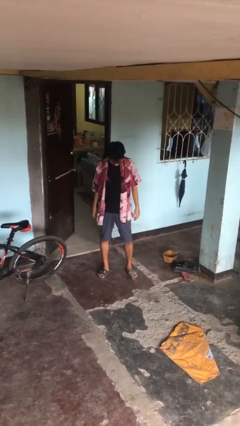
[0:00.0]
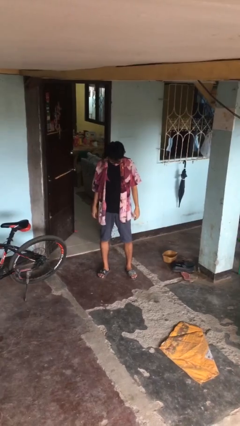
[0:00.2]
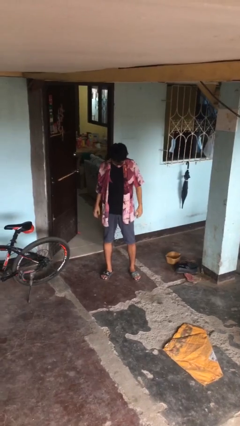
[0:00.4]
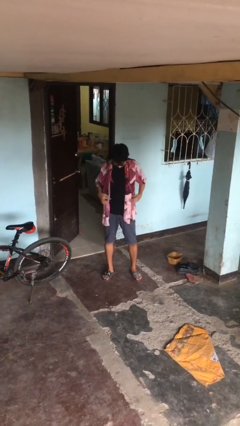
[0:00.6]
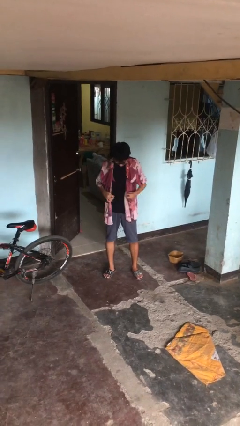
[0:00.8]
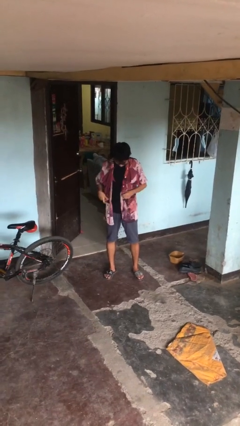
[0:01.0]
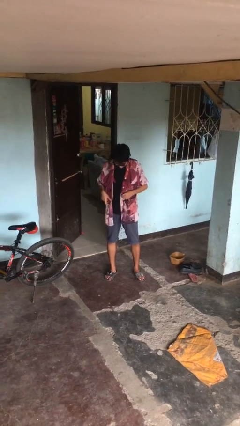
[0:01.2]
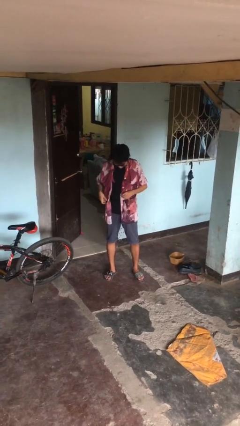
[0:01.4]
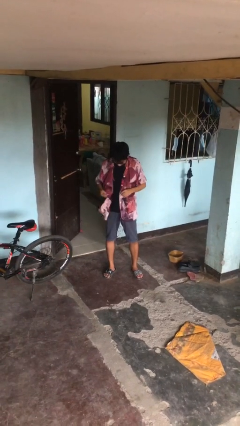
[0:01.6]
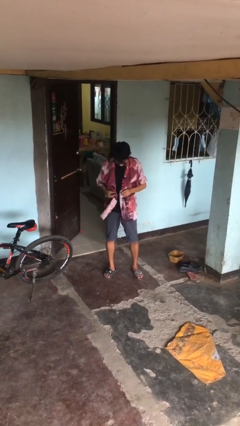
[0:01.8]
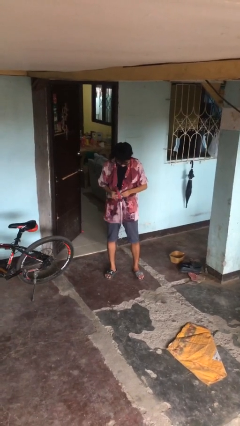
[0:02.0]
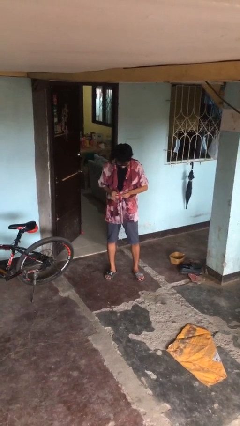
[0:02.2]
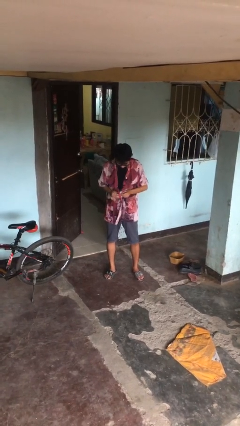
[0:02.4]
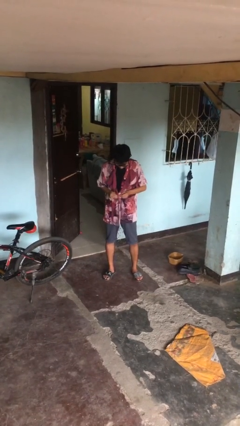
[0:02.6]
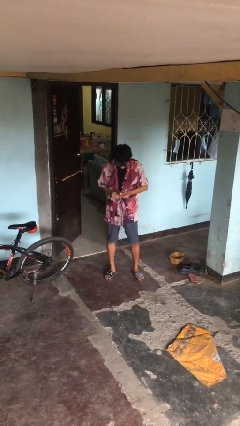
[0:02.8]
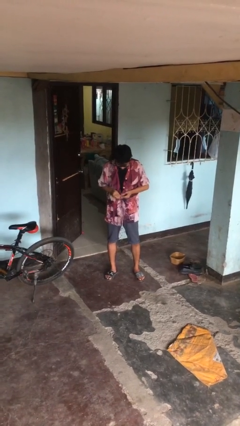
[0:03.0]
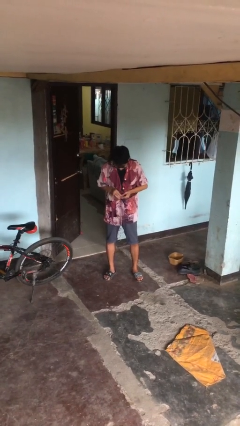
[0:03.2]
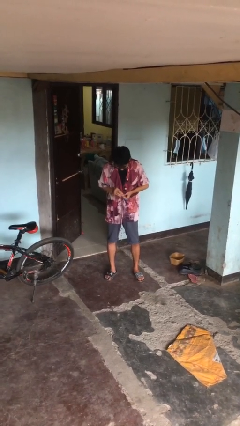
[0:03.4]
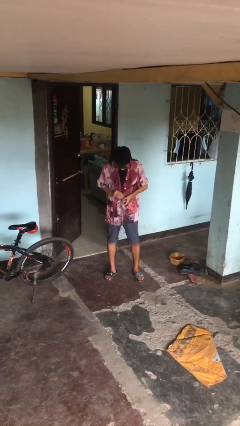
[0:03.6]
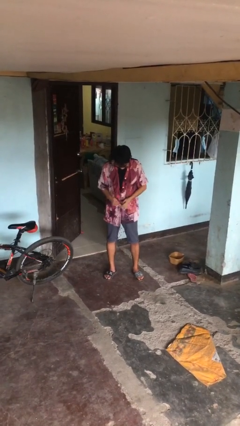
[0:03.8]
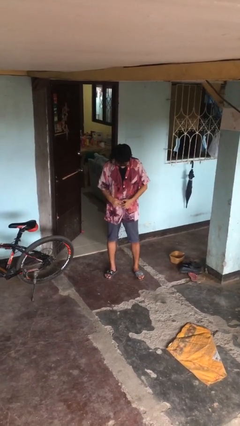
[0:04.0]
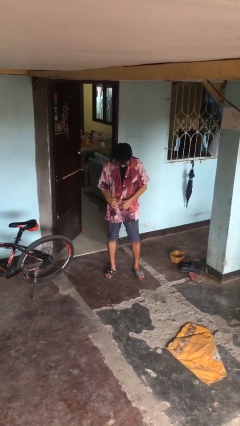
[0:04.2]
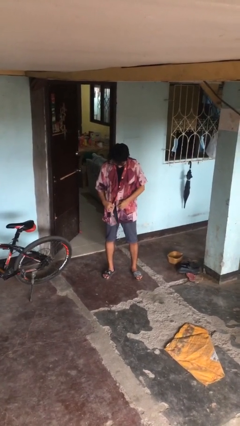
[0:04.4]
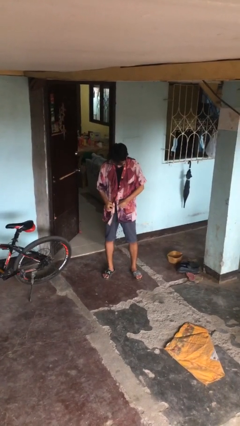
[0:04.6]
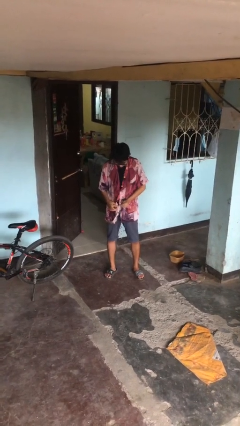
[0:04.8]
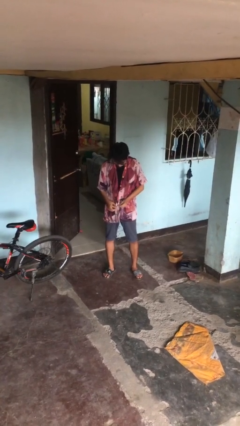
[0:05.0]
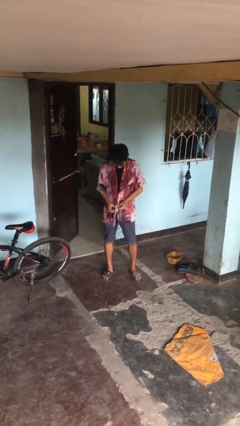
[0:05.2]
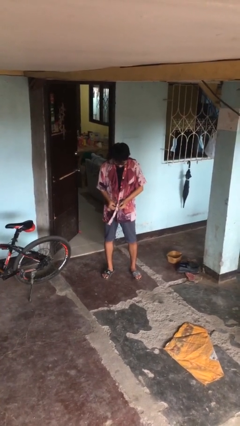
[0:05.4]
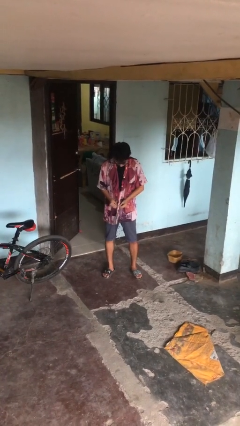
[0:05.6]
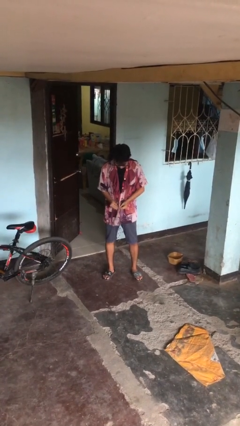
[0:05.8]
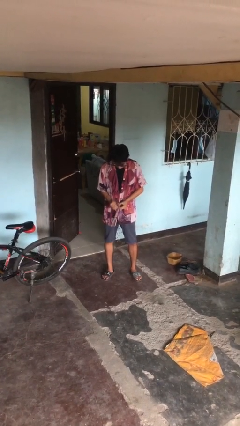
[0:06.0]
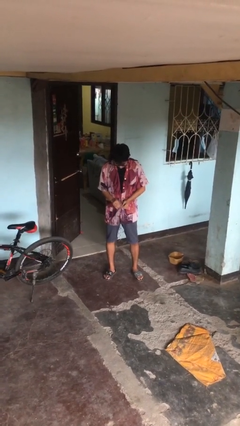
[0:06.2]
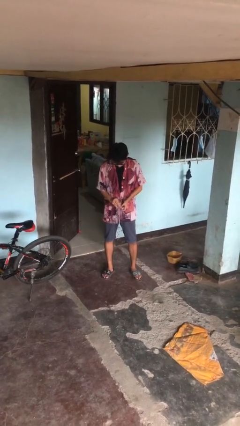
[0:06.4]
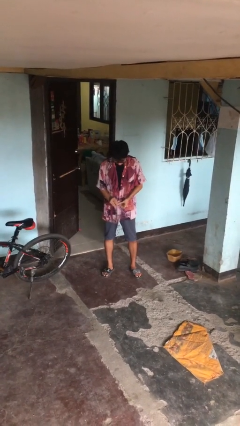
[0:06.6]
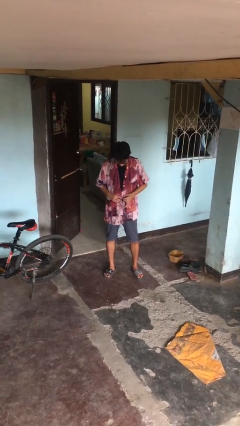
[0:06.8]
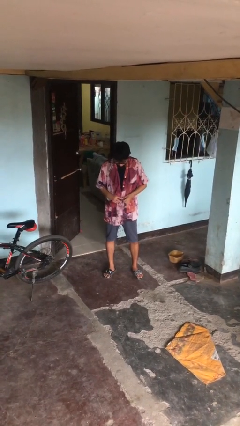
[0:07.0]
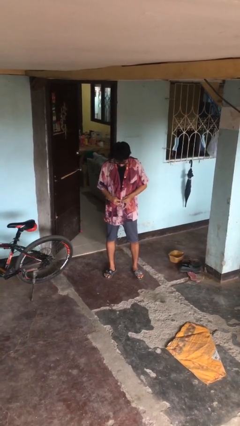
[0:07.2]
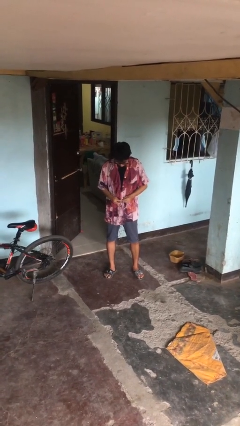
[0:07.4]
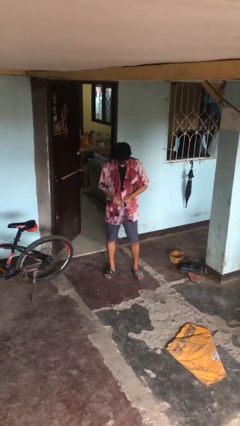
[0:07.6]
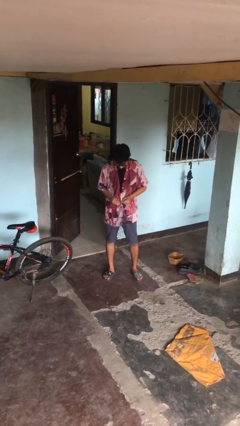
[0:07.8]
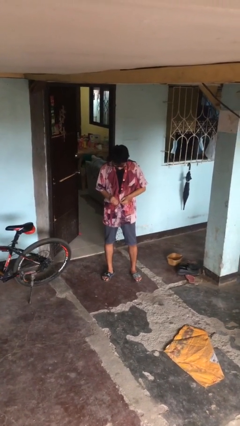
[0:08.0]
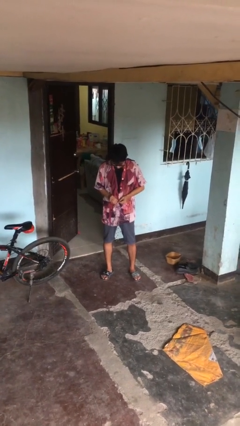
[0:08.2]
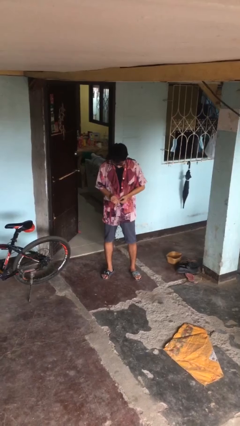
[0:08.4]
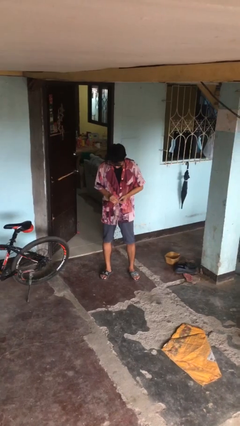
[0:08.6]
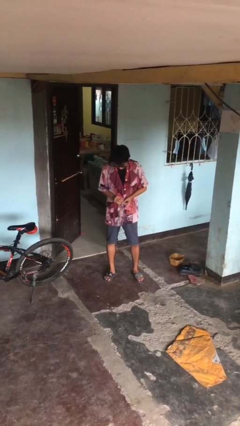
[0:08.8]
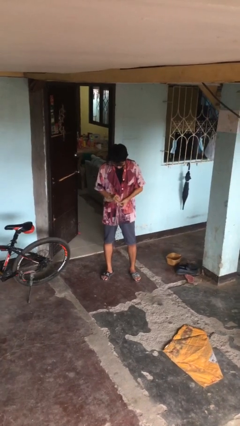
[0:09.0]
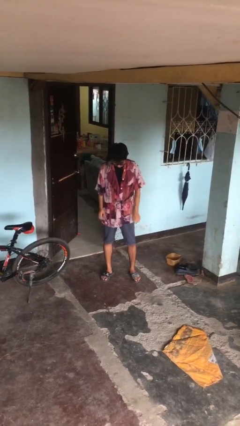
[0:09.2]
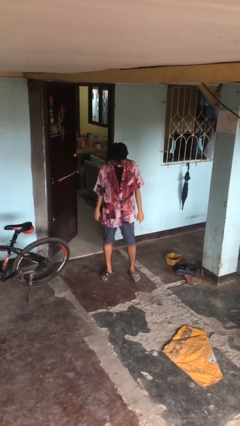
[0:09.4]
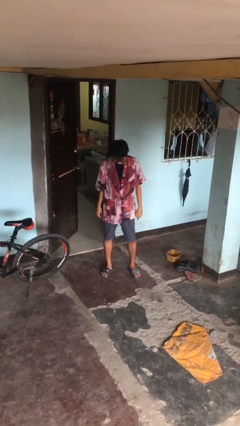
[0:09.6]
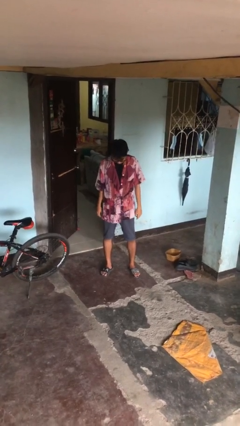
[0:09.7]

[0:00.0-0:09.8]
person buttons shirt

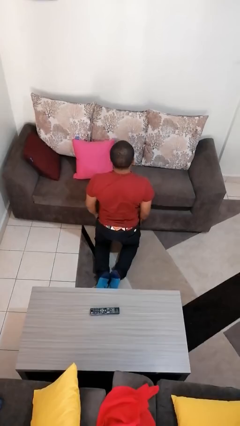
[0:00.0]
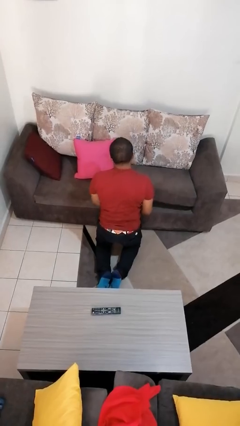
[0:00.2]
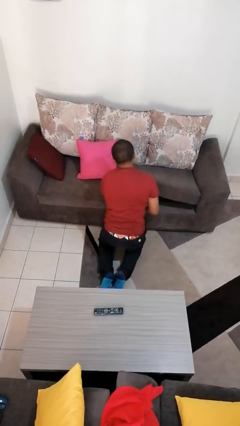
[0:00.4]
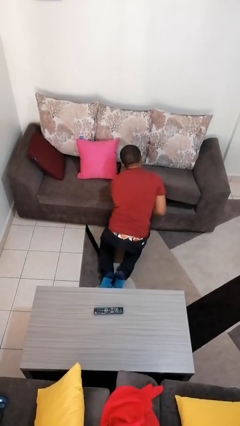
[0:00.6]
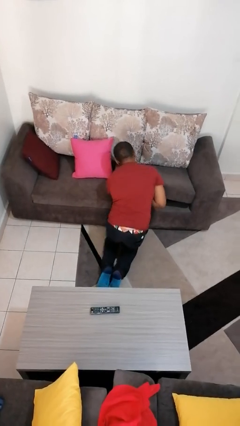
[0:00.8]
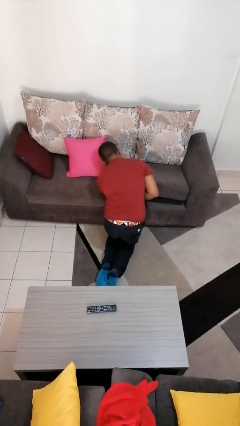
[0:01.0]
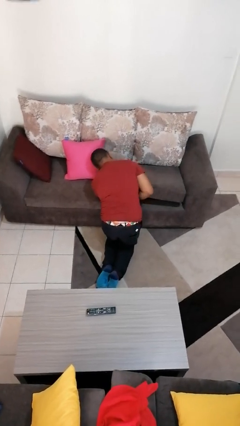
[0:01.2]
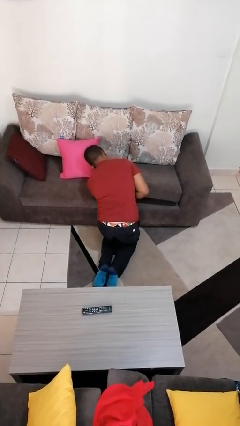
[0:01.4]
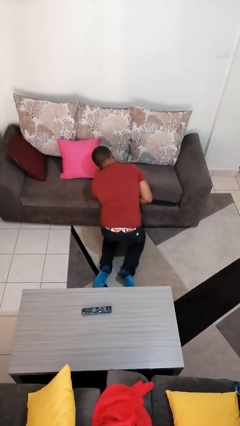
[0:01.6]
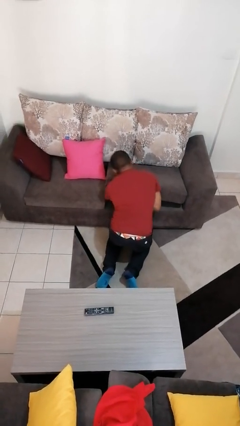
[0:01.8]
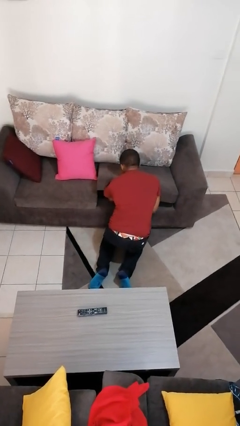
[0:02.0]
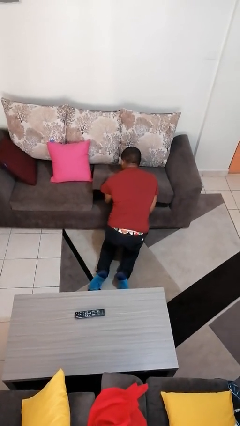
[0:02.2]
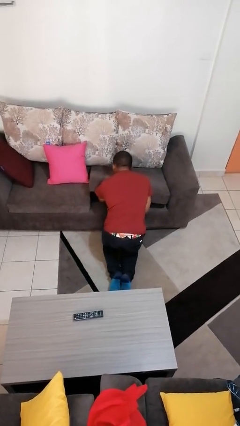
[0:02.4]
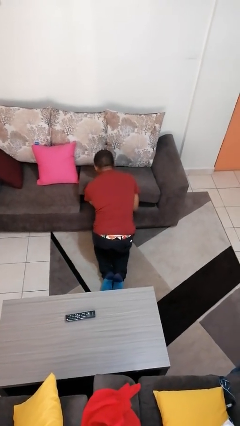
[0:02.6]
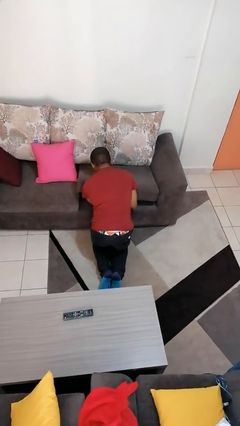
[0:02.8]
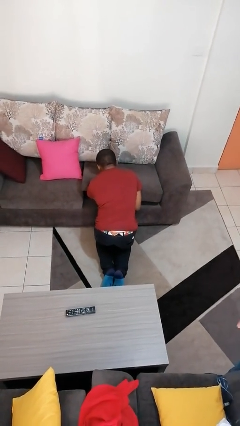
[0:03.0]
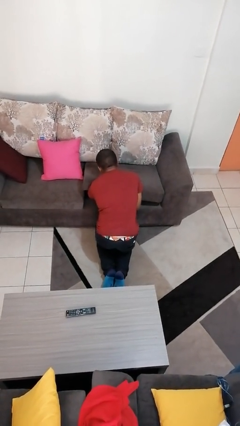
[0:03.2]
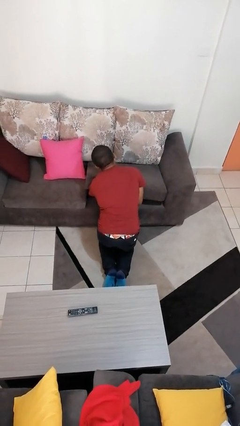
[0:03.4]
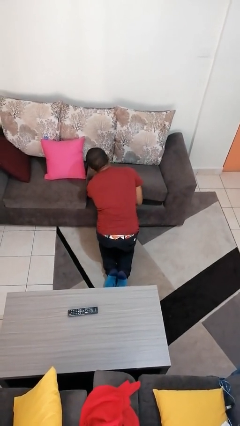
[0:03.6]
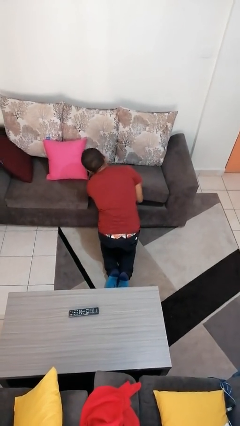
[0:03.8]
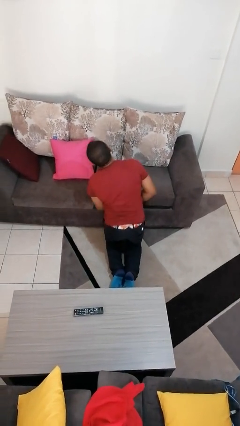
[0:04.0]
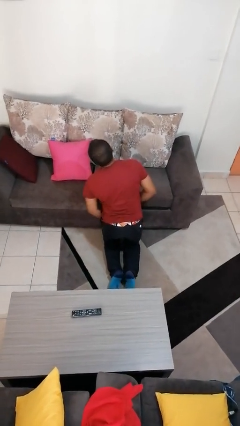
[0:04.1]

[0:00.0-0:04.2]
person searches under couch

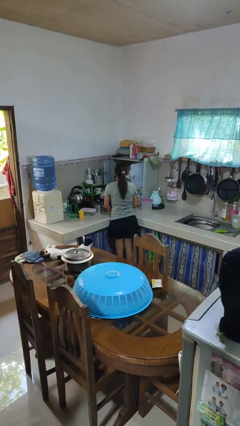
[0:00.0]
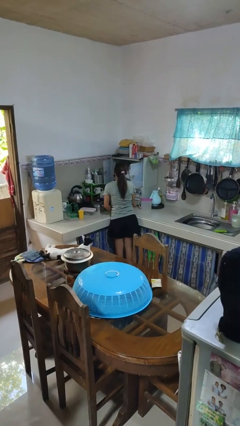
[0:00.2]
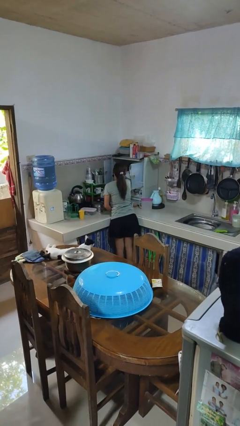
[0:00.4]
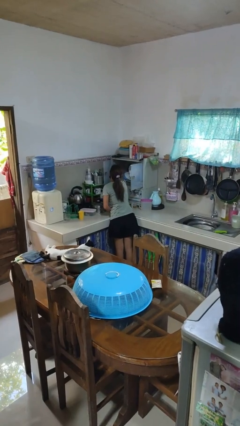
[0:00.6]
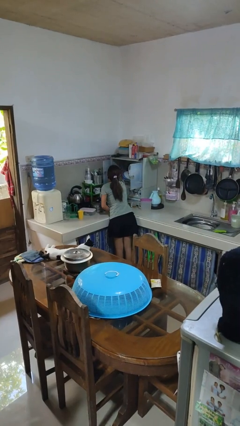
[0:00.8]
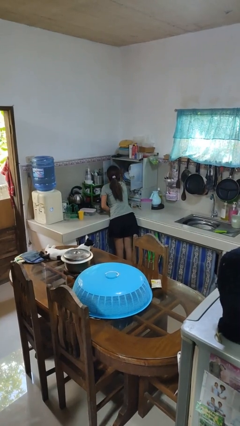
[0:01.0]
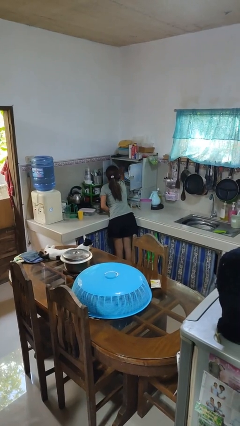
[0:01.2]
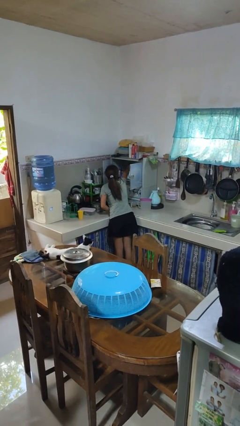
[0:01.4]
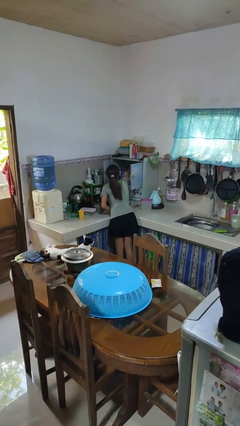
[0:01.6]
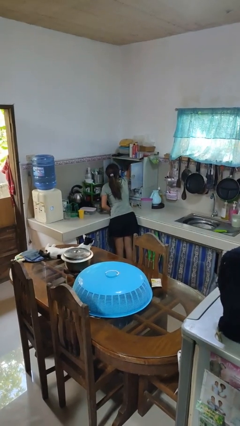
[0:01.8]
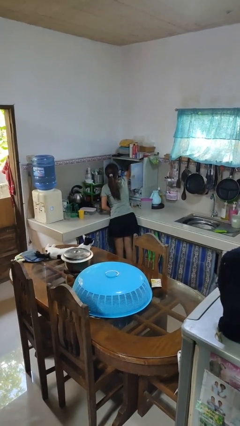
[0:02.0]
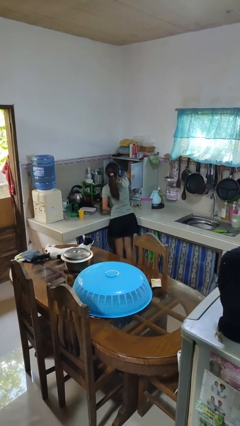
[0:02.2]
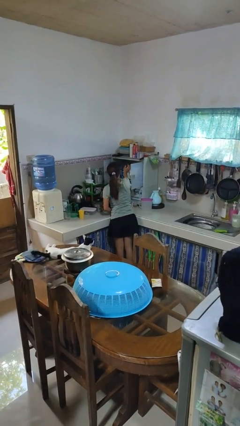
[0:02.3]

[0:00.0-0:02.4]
person searches in kitchen drawer

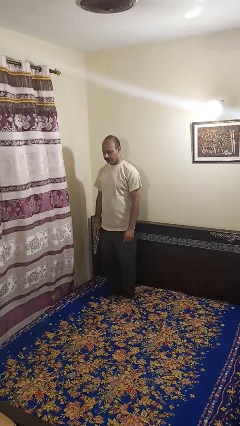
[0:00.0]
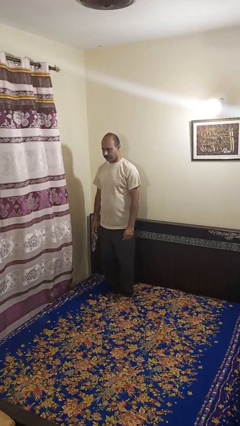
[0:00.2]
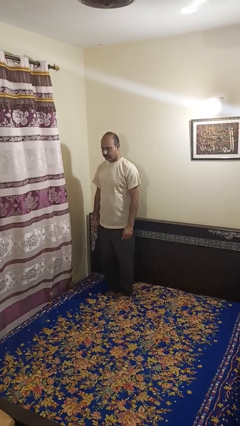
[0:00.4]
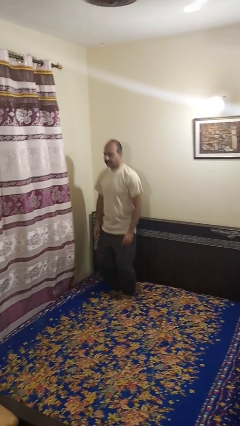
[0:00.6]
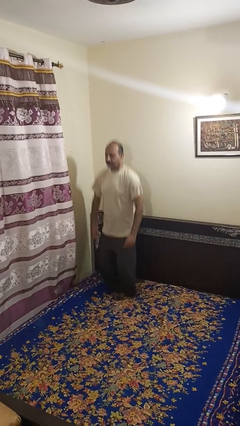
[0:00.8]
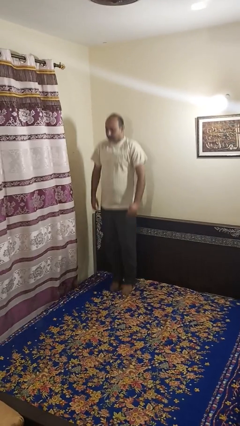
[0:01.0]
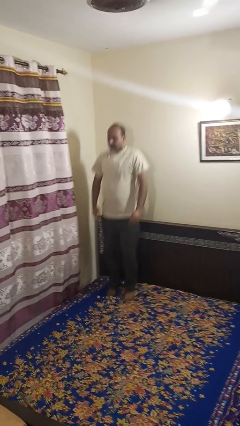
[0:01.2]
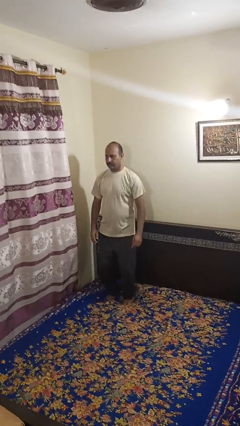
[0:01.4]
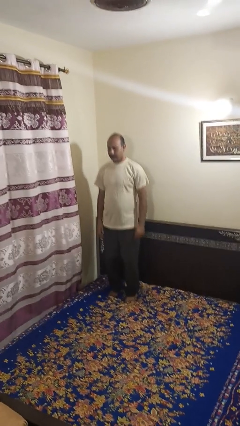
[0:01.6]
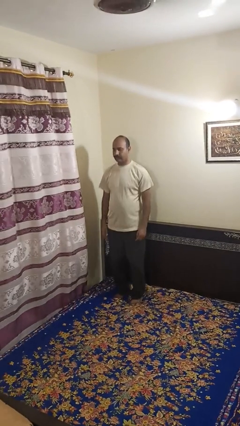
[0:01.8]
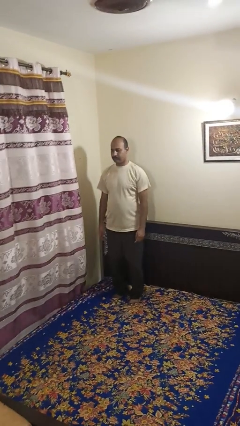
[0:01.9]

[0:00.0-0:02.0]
person jumps on bed
